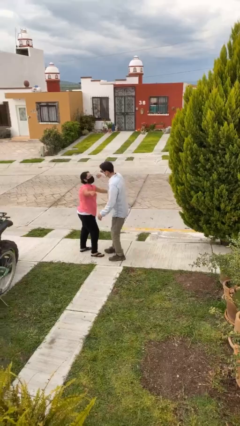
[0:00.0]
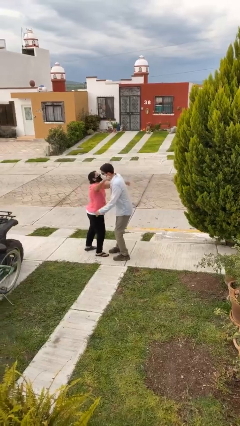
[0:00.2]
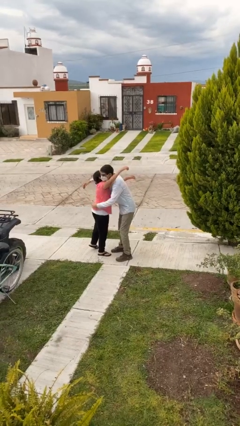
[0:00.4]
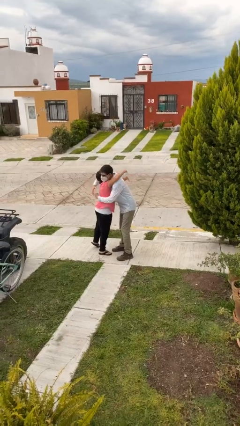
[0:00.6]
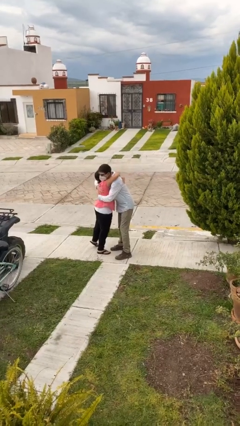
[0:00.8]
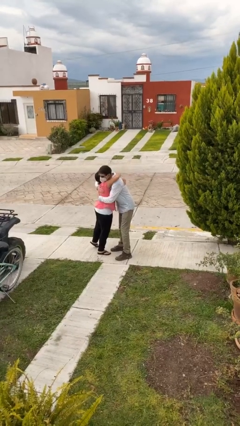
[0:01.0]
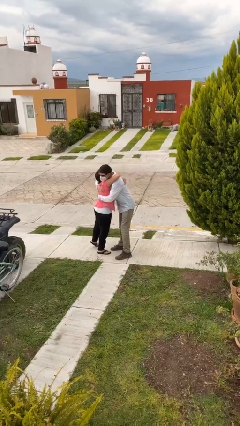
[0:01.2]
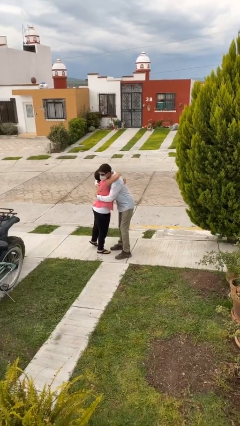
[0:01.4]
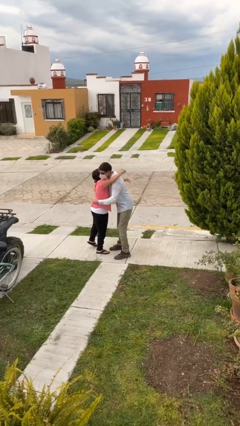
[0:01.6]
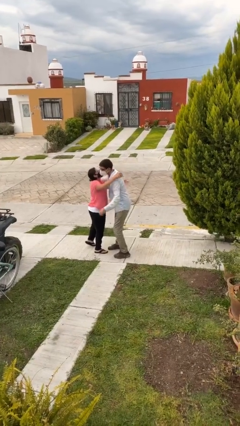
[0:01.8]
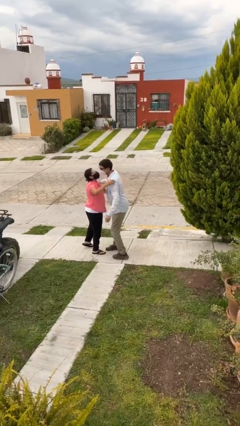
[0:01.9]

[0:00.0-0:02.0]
person embraces person

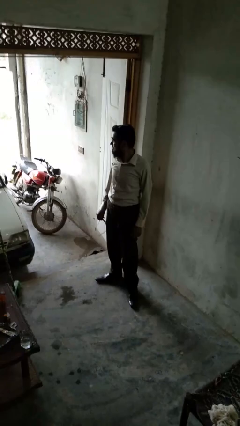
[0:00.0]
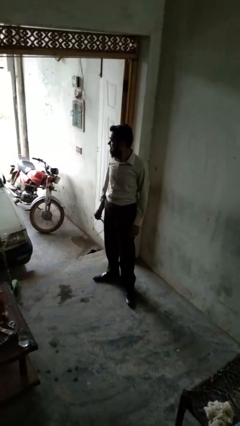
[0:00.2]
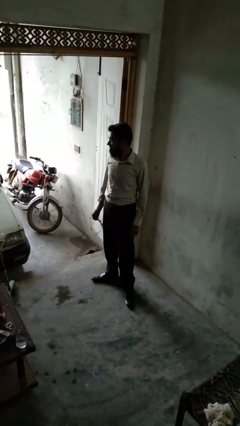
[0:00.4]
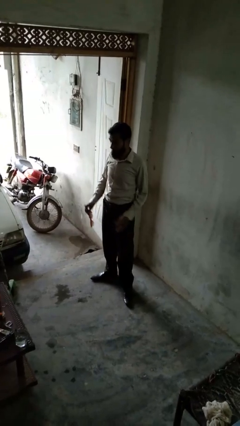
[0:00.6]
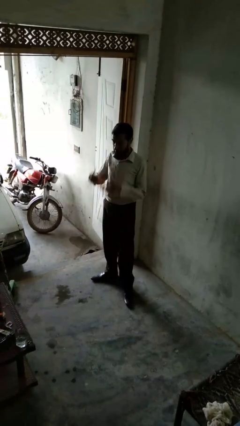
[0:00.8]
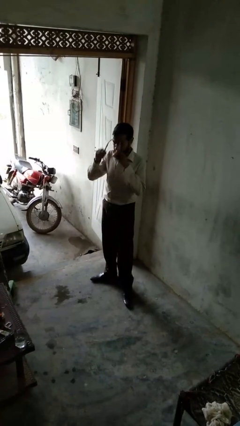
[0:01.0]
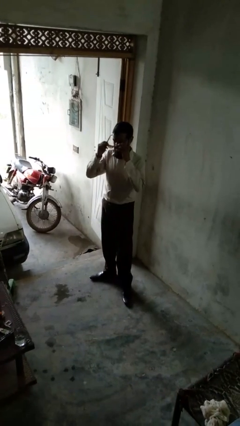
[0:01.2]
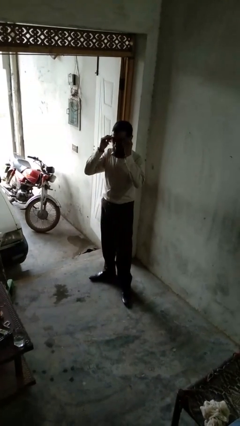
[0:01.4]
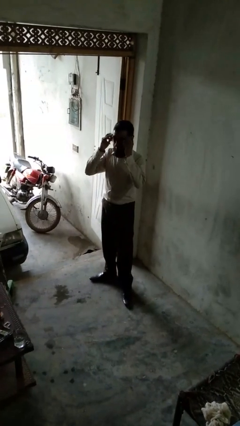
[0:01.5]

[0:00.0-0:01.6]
person puts on sunglasses

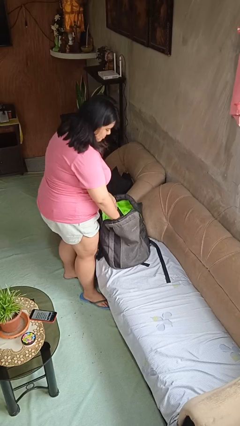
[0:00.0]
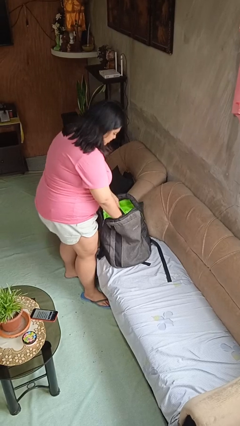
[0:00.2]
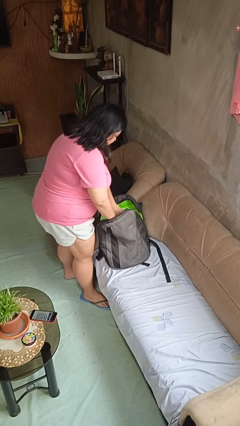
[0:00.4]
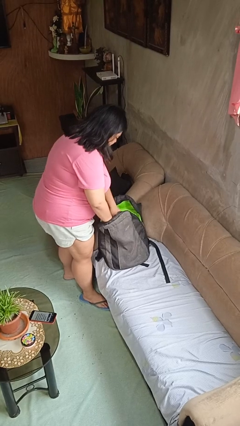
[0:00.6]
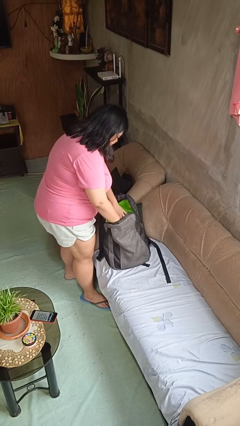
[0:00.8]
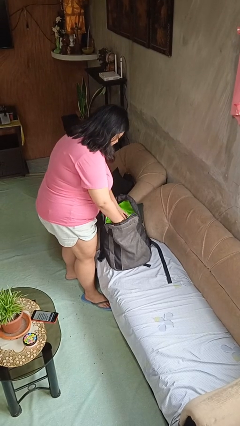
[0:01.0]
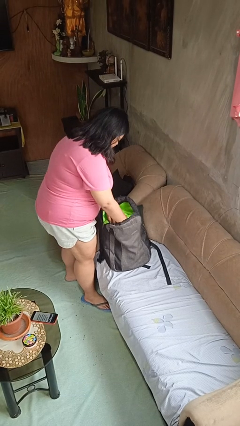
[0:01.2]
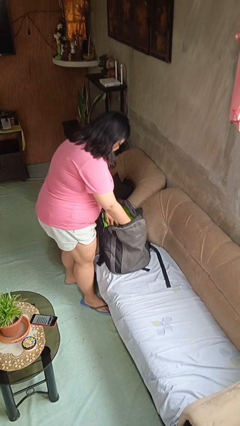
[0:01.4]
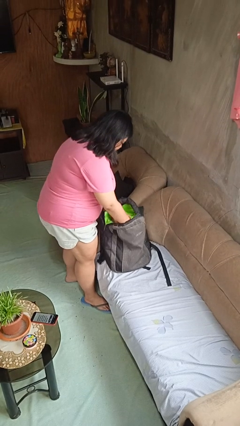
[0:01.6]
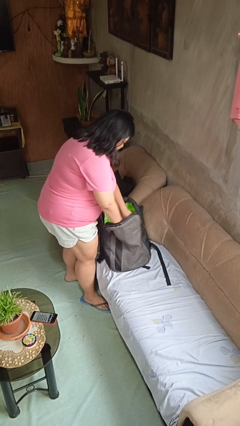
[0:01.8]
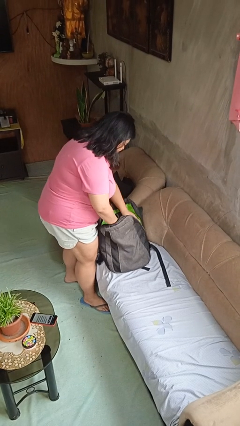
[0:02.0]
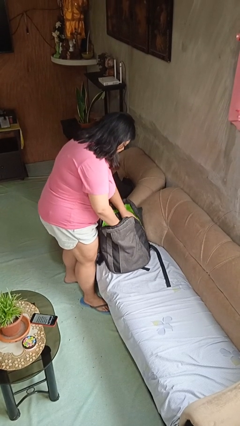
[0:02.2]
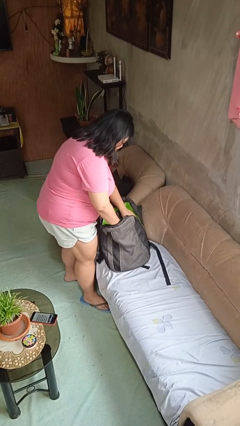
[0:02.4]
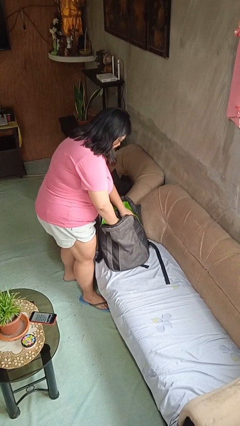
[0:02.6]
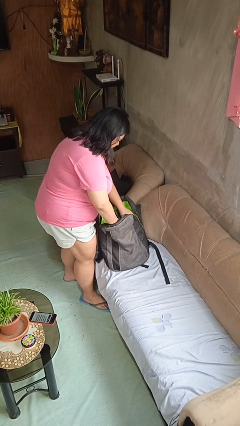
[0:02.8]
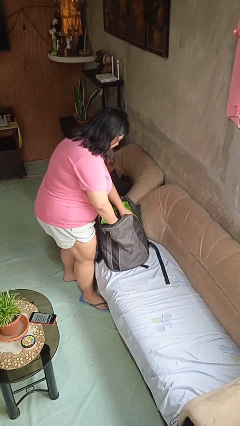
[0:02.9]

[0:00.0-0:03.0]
person searches in backpack

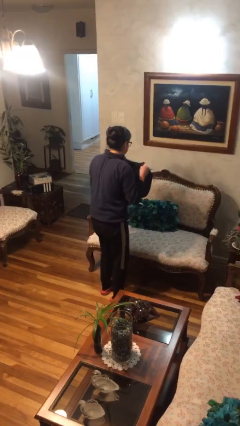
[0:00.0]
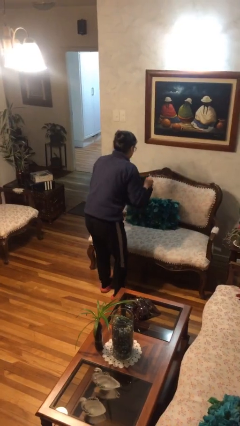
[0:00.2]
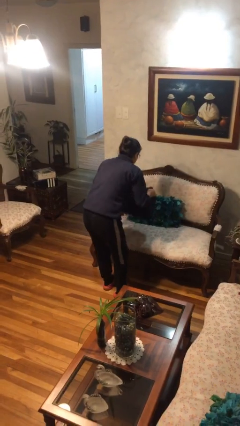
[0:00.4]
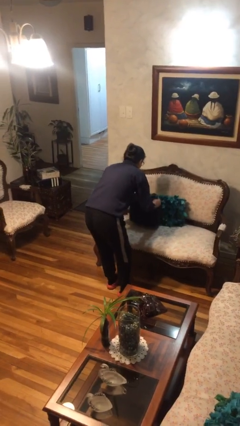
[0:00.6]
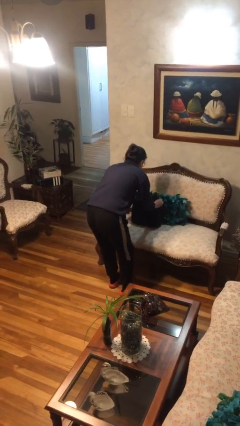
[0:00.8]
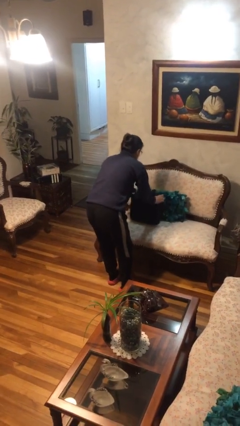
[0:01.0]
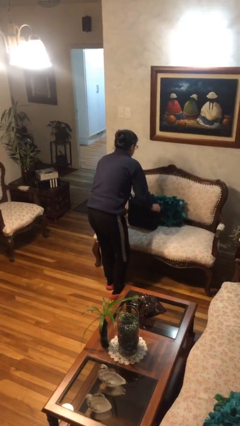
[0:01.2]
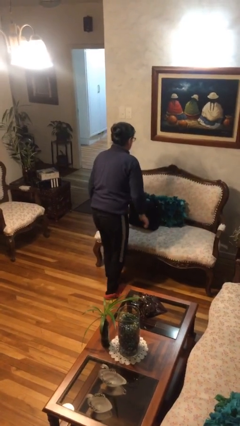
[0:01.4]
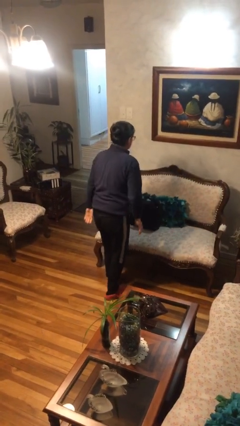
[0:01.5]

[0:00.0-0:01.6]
person puts down object on couch

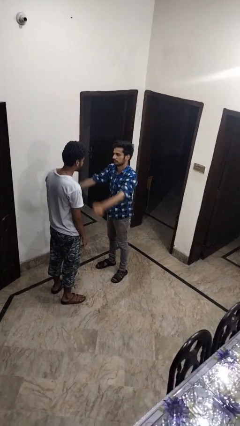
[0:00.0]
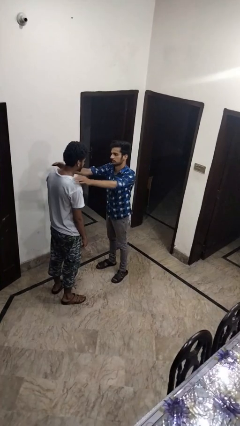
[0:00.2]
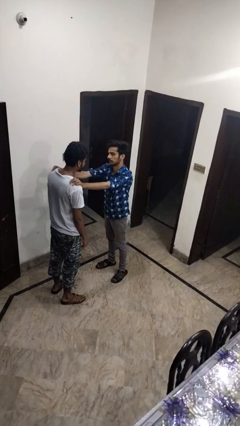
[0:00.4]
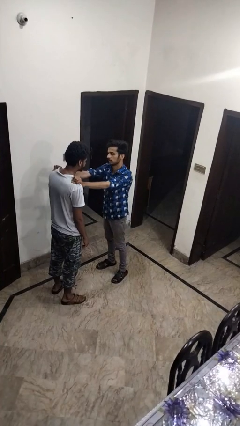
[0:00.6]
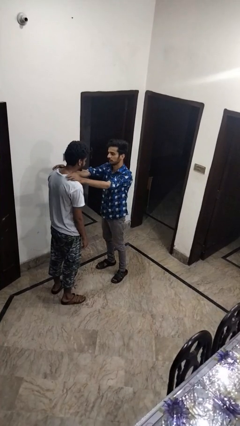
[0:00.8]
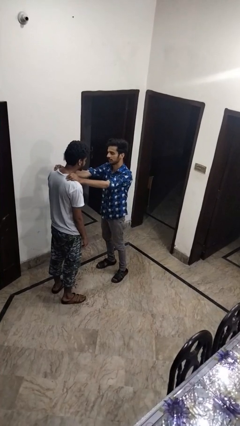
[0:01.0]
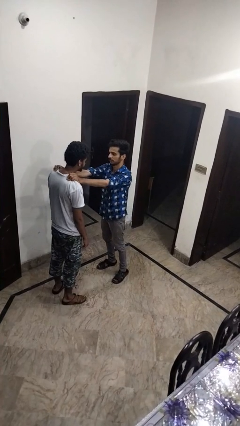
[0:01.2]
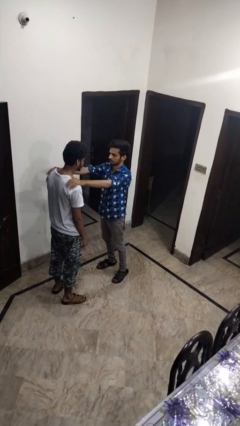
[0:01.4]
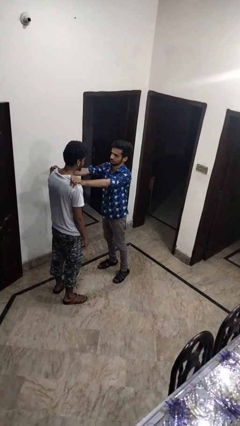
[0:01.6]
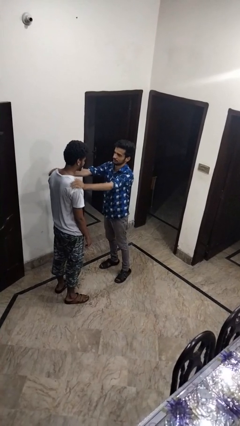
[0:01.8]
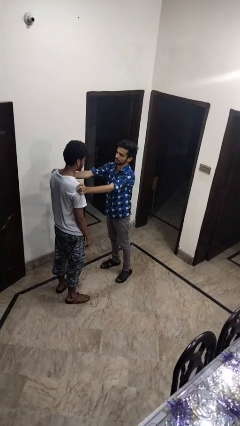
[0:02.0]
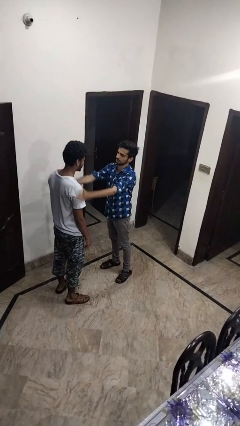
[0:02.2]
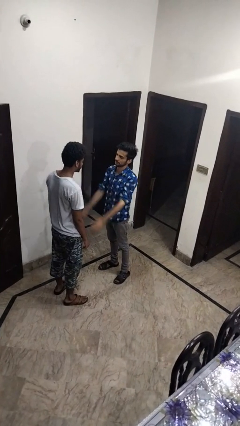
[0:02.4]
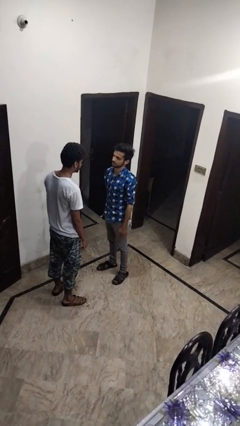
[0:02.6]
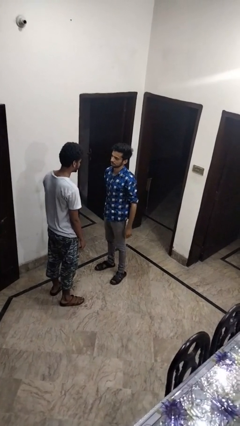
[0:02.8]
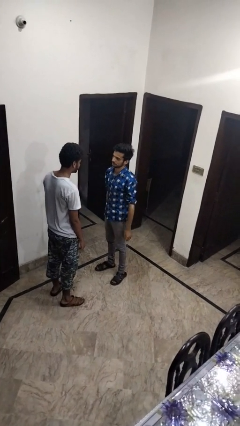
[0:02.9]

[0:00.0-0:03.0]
person pounds shoulders of person

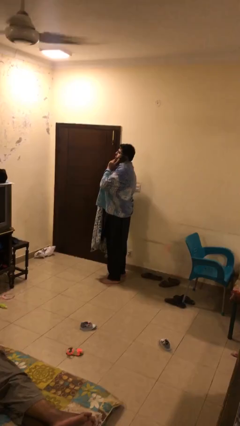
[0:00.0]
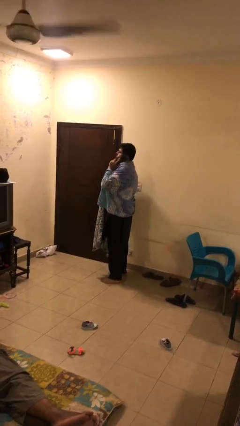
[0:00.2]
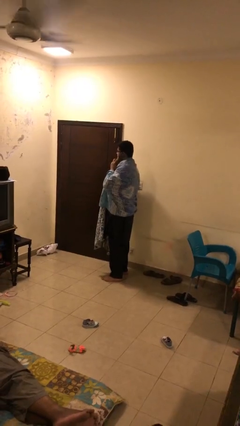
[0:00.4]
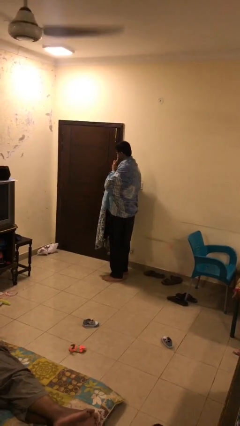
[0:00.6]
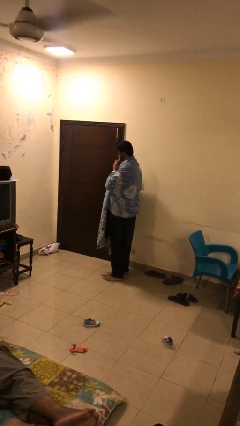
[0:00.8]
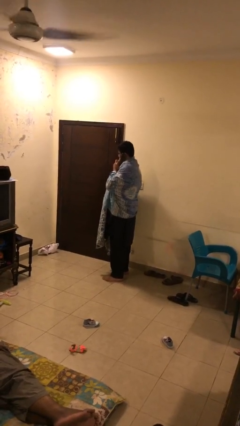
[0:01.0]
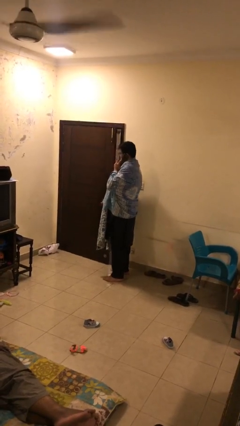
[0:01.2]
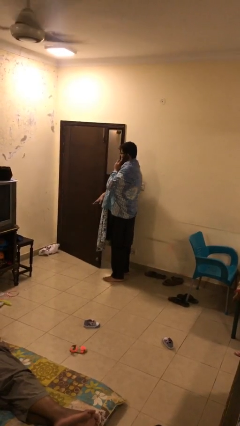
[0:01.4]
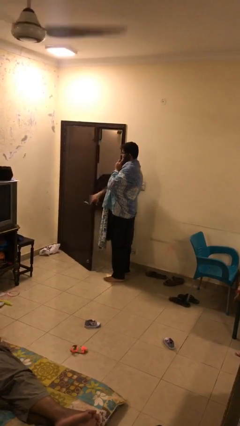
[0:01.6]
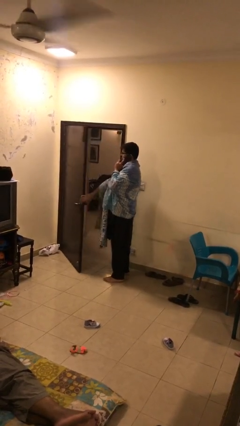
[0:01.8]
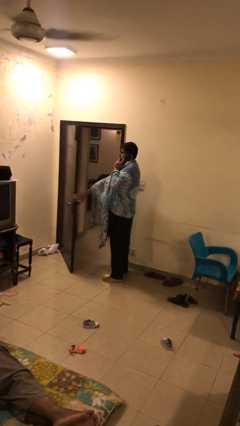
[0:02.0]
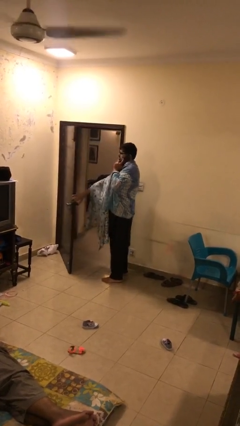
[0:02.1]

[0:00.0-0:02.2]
person opens facility door

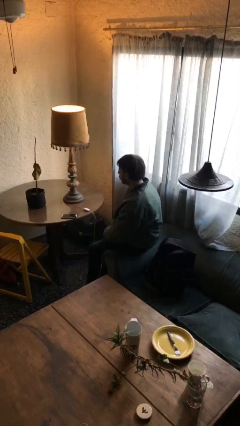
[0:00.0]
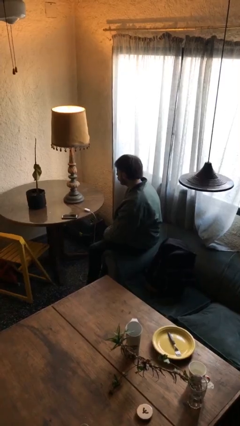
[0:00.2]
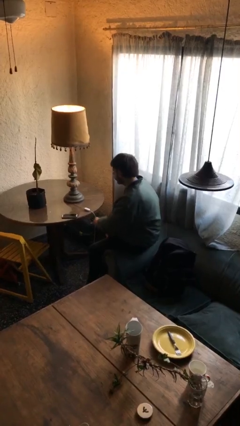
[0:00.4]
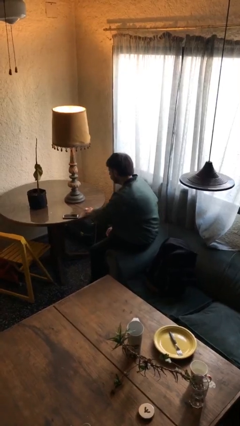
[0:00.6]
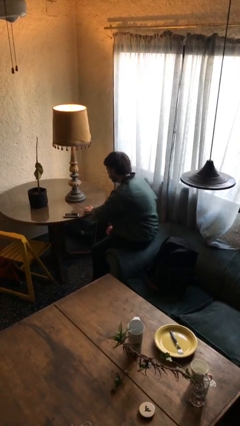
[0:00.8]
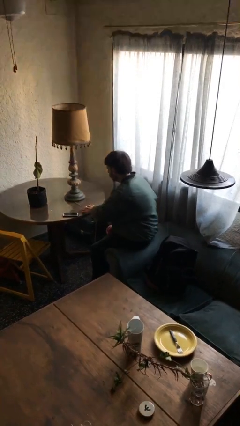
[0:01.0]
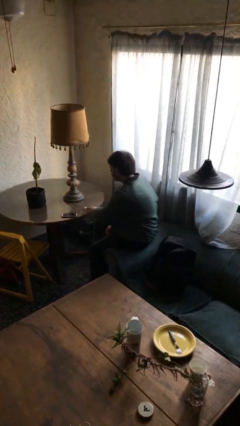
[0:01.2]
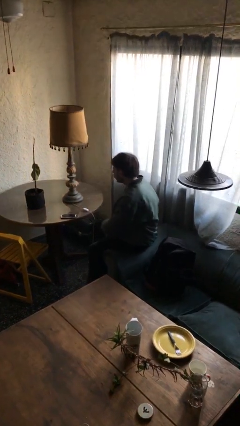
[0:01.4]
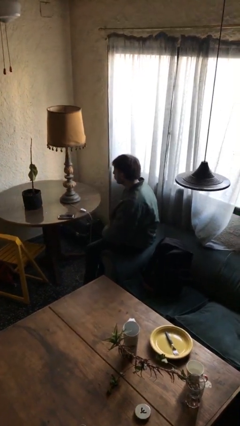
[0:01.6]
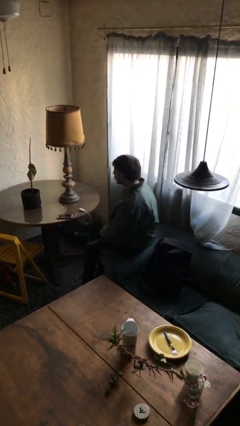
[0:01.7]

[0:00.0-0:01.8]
person turns off lamp

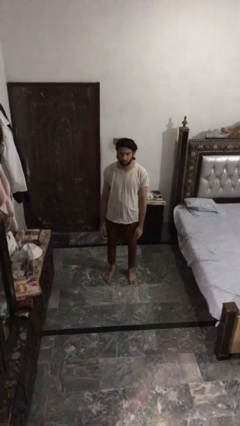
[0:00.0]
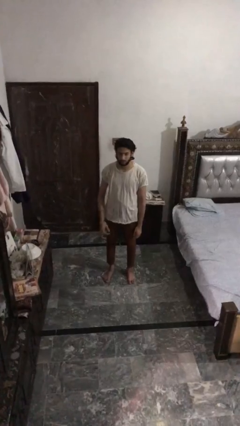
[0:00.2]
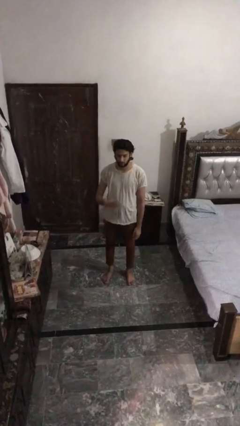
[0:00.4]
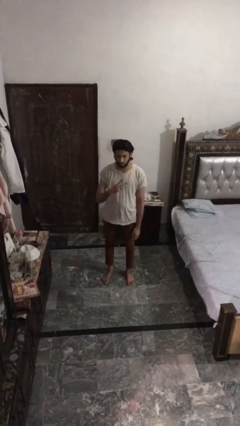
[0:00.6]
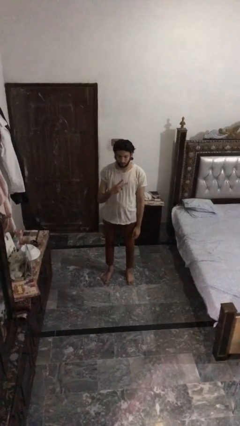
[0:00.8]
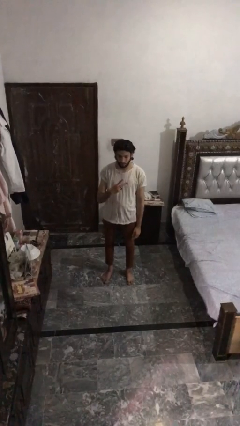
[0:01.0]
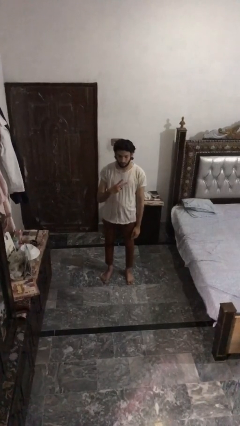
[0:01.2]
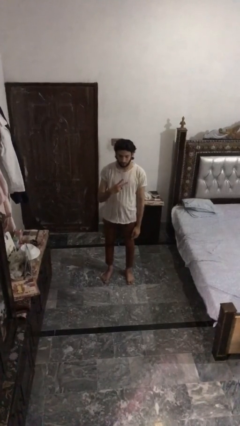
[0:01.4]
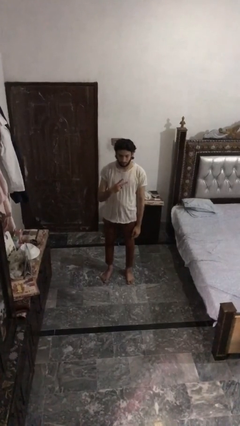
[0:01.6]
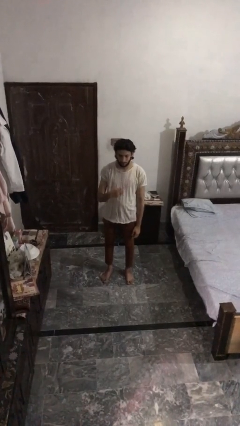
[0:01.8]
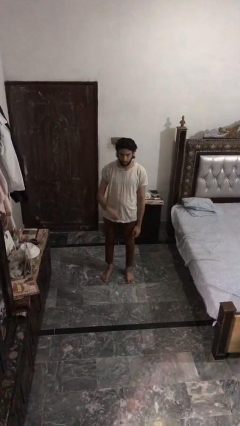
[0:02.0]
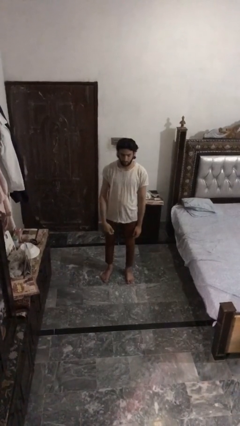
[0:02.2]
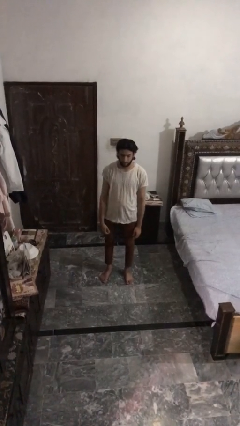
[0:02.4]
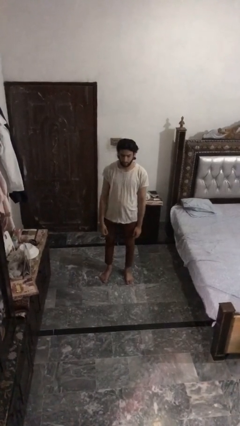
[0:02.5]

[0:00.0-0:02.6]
person gestures peace
